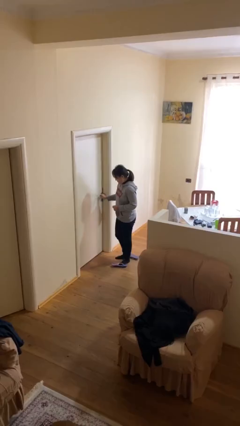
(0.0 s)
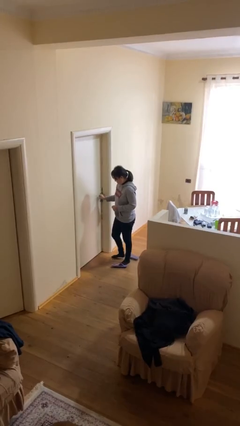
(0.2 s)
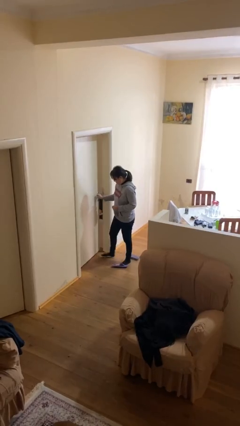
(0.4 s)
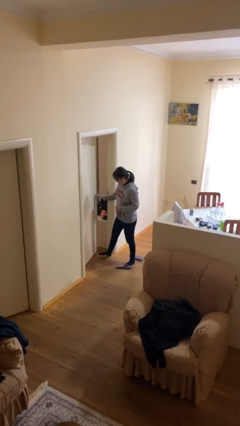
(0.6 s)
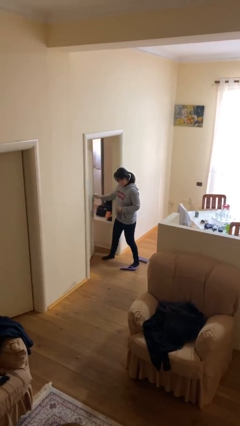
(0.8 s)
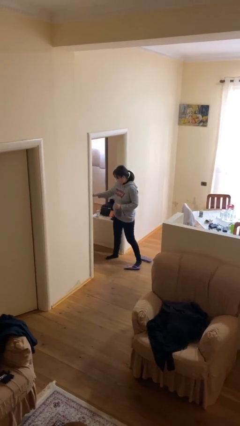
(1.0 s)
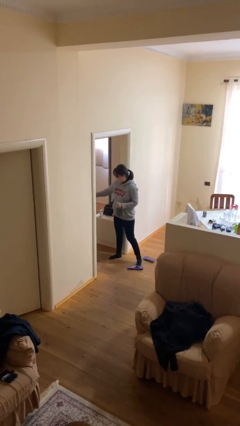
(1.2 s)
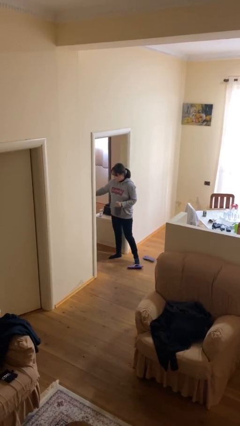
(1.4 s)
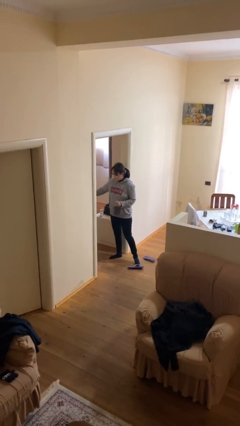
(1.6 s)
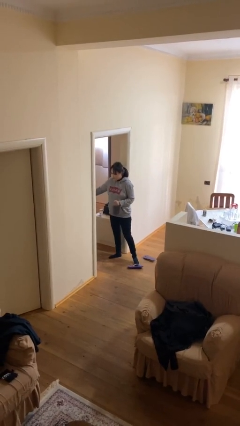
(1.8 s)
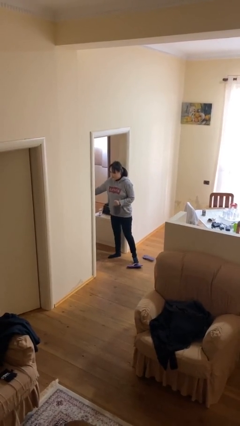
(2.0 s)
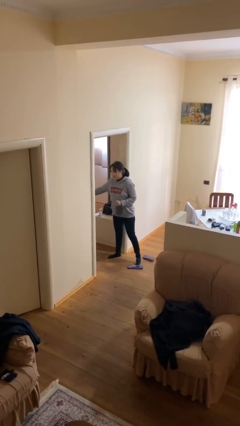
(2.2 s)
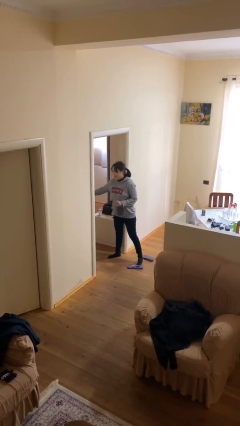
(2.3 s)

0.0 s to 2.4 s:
person opens facility door

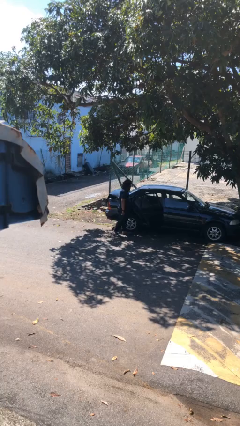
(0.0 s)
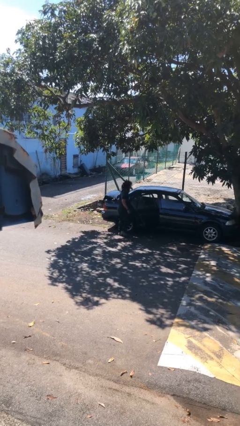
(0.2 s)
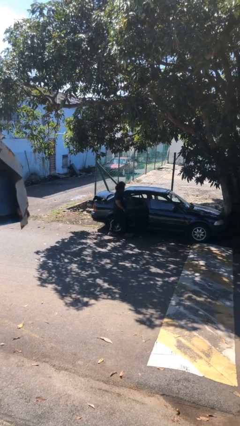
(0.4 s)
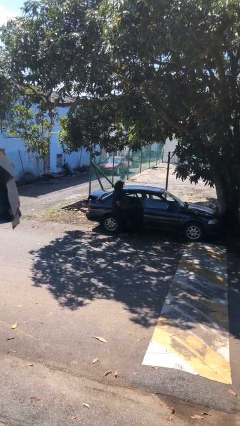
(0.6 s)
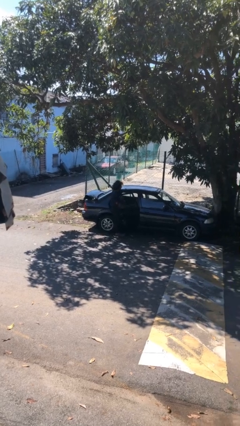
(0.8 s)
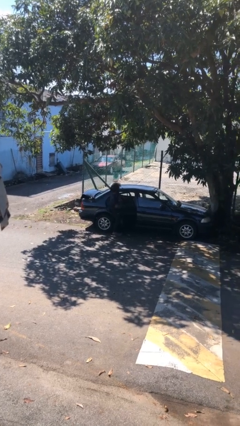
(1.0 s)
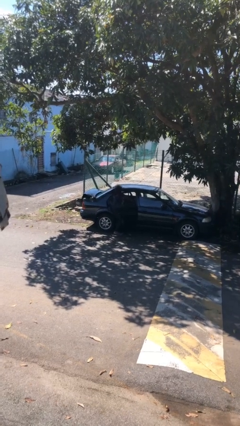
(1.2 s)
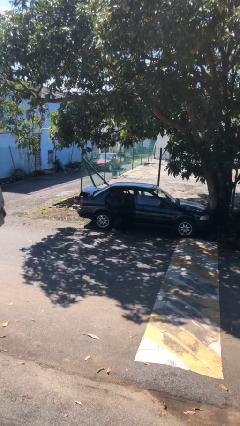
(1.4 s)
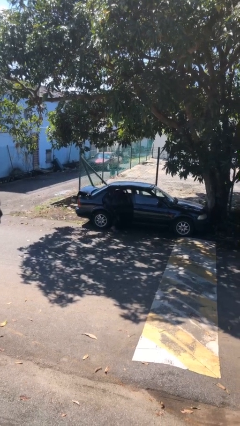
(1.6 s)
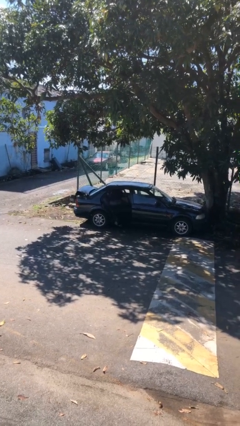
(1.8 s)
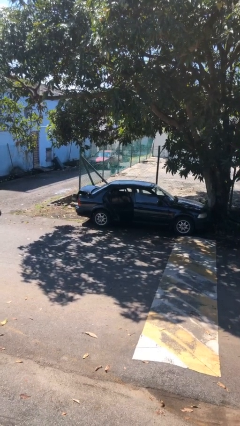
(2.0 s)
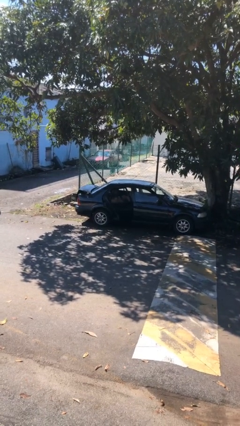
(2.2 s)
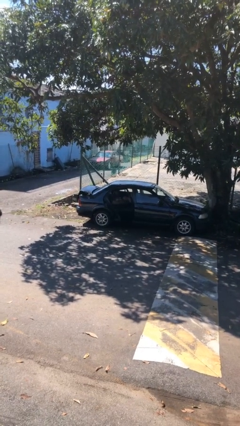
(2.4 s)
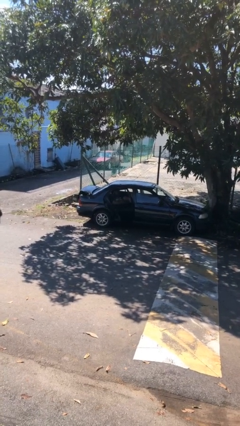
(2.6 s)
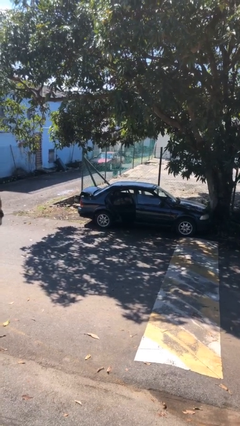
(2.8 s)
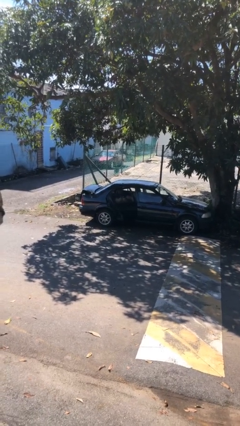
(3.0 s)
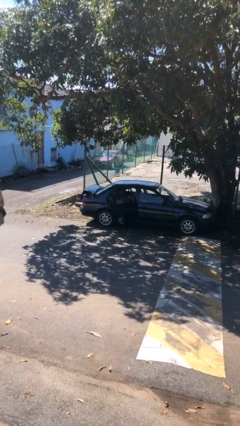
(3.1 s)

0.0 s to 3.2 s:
person enters car

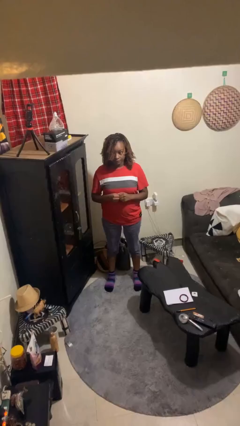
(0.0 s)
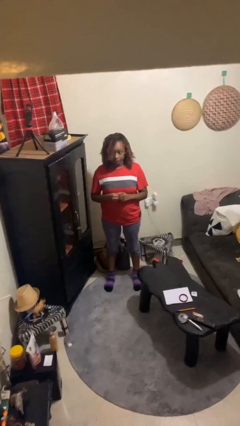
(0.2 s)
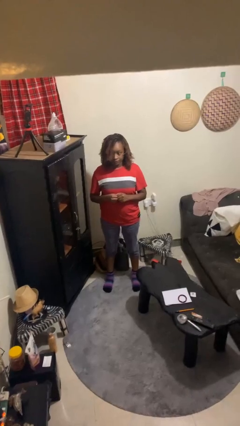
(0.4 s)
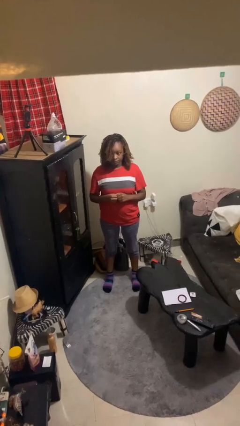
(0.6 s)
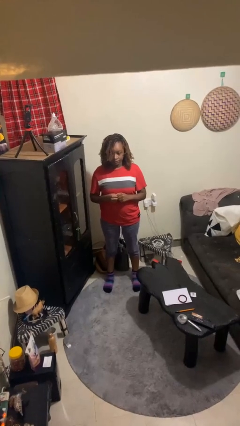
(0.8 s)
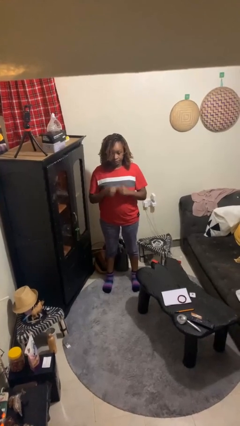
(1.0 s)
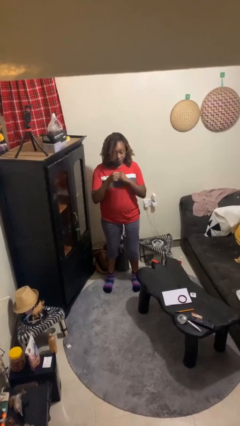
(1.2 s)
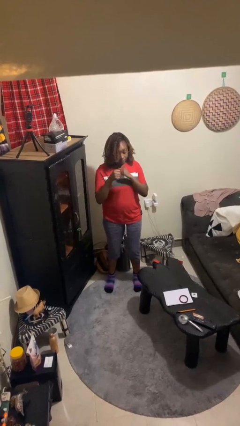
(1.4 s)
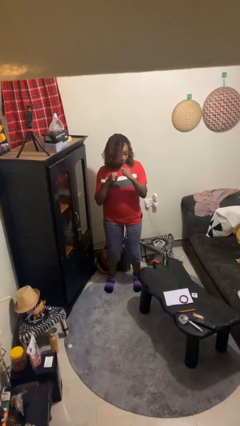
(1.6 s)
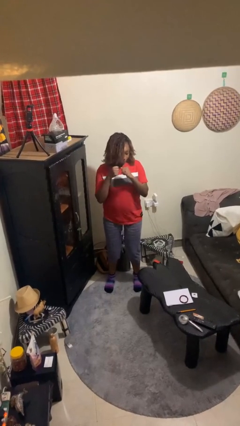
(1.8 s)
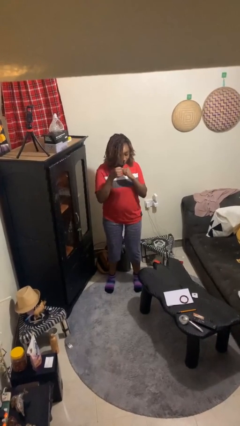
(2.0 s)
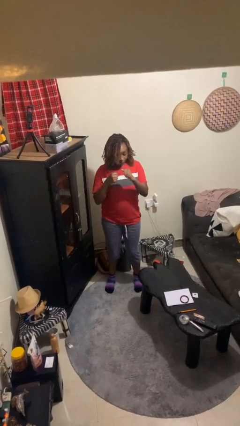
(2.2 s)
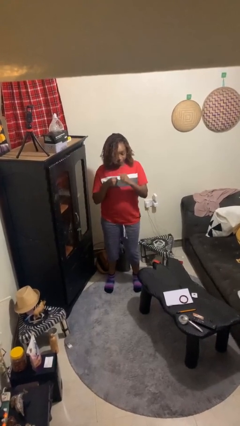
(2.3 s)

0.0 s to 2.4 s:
person punches

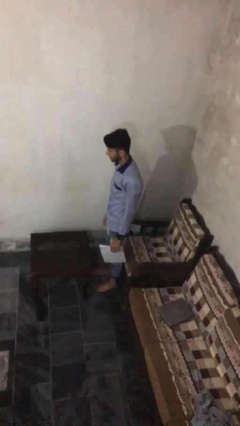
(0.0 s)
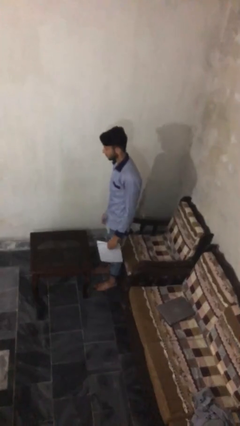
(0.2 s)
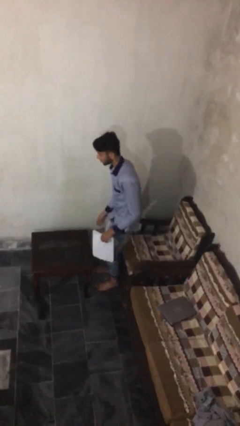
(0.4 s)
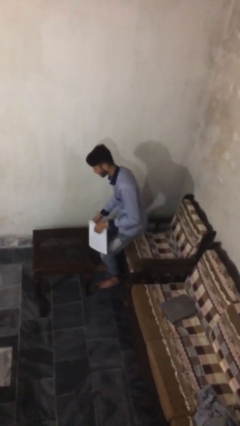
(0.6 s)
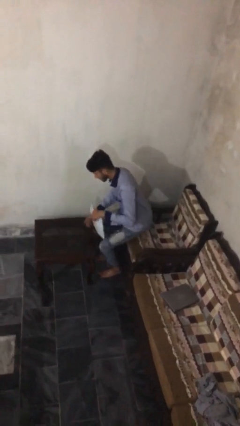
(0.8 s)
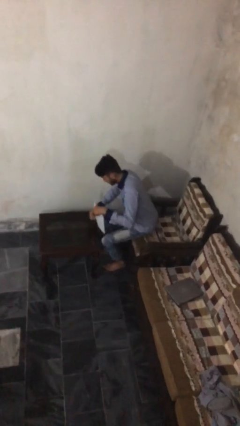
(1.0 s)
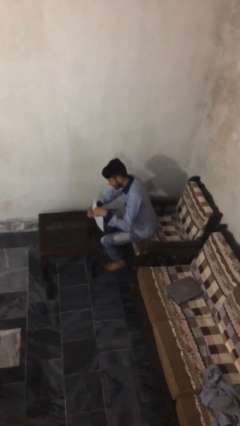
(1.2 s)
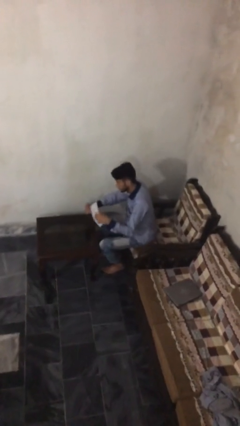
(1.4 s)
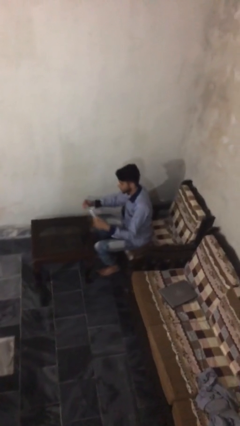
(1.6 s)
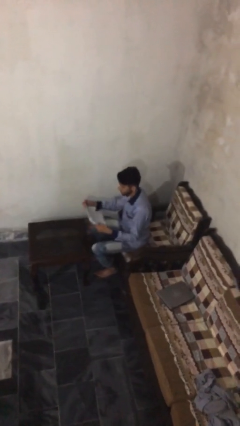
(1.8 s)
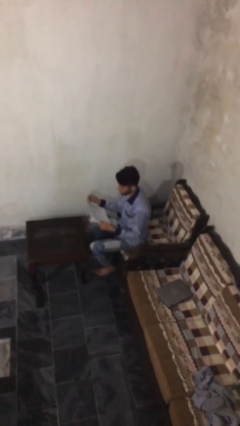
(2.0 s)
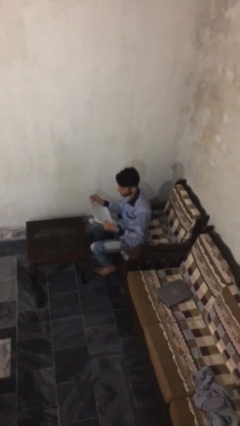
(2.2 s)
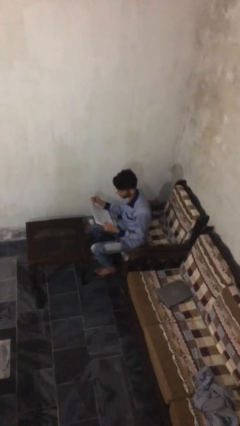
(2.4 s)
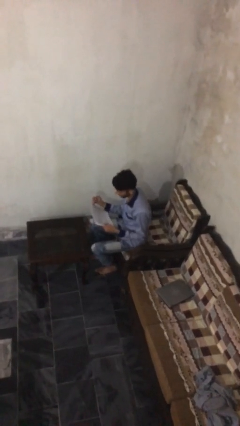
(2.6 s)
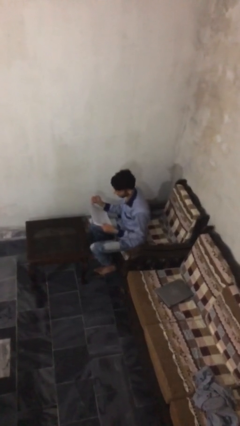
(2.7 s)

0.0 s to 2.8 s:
person sits down

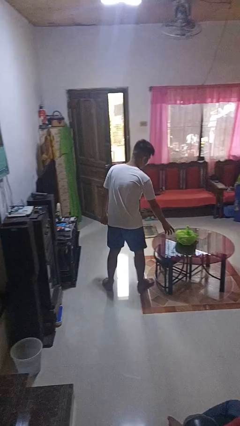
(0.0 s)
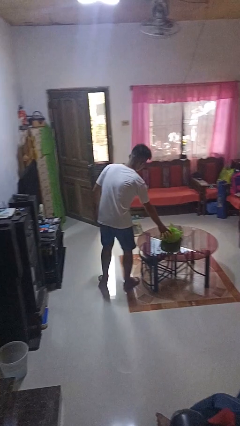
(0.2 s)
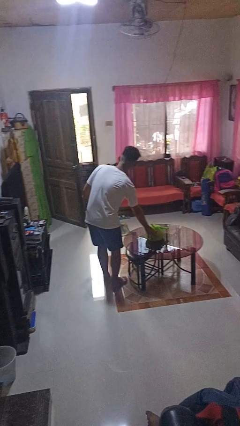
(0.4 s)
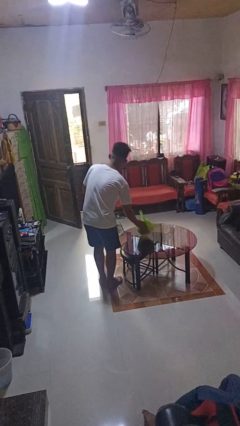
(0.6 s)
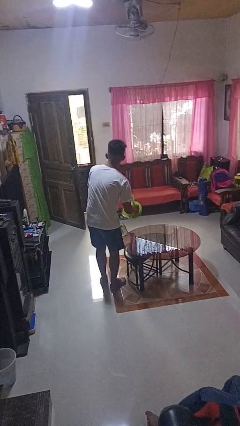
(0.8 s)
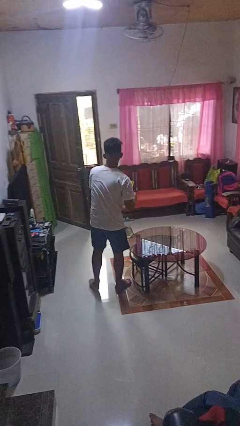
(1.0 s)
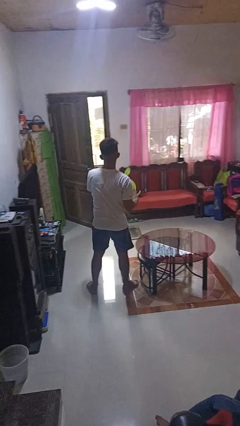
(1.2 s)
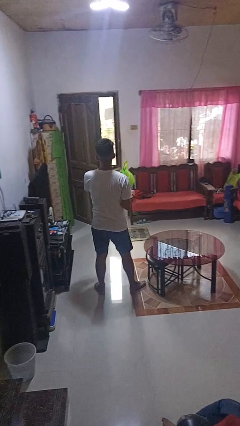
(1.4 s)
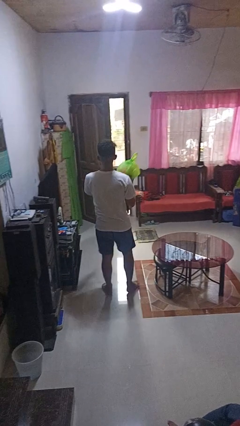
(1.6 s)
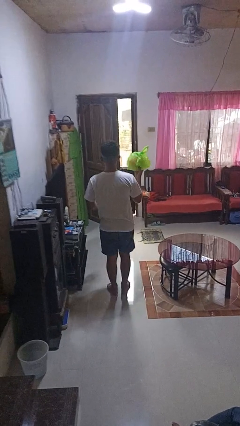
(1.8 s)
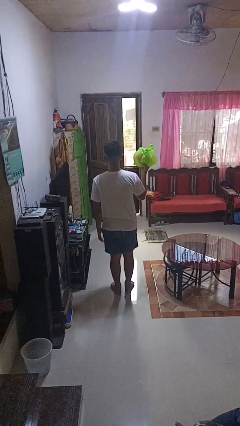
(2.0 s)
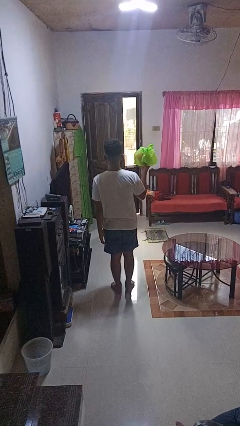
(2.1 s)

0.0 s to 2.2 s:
person picks up object from table

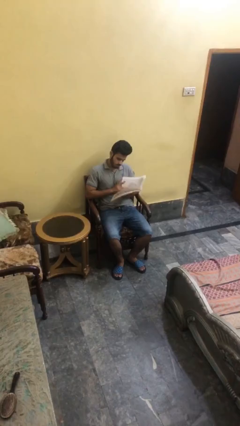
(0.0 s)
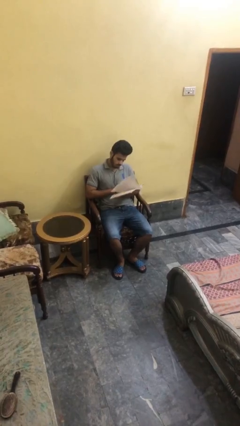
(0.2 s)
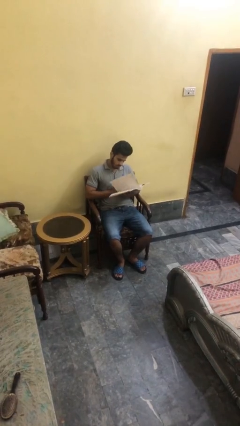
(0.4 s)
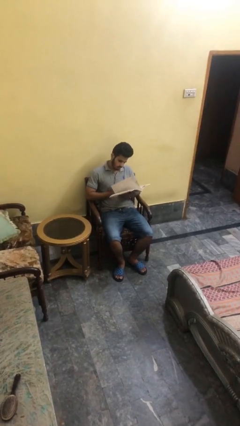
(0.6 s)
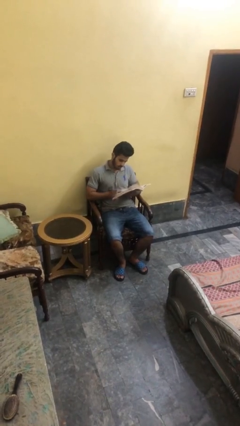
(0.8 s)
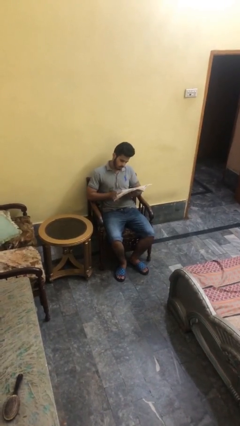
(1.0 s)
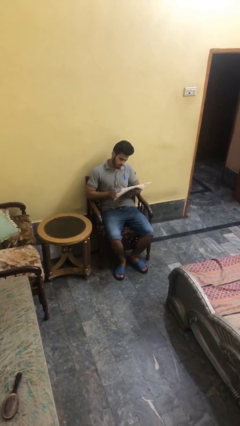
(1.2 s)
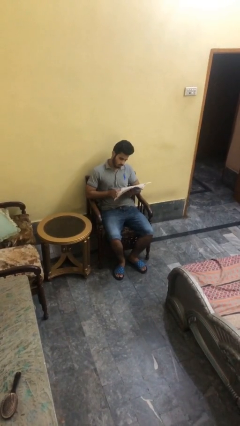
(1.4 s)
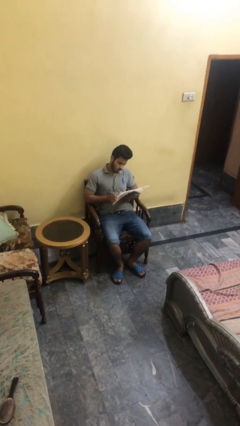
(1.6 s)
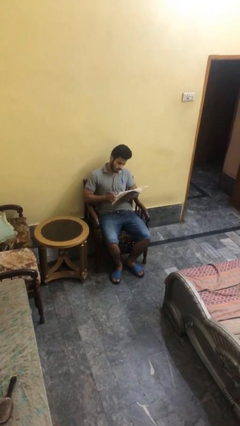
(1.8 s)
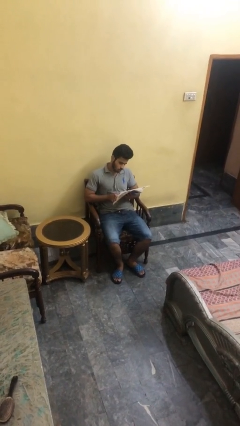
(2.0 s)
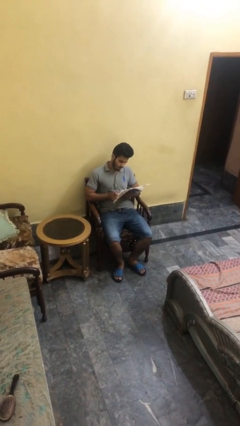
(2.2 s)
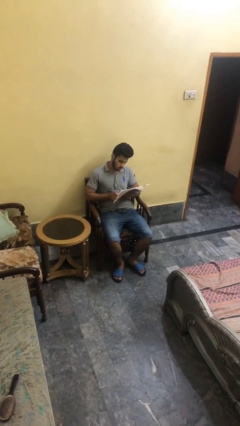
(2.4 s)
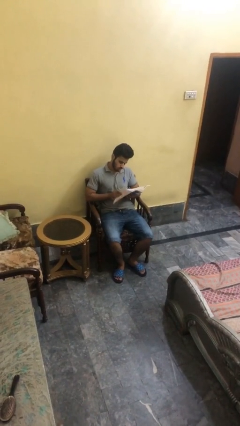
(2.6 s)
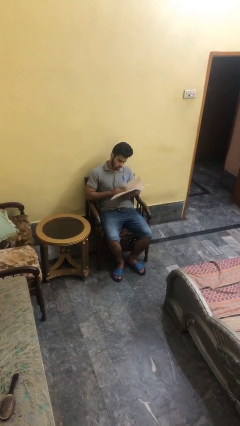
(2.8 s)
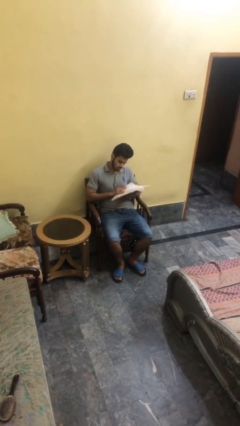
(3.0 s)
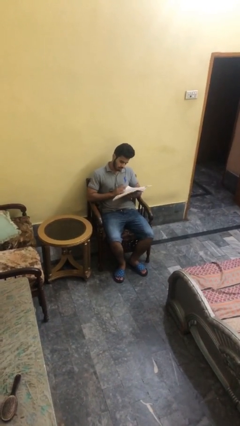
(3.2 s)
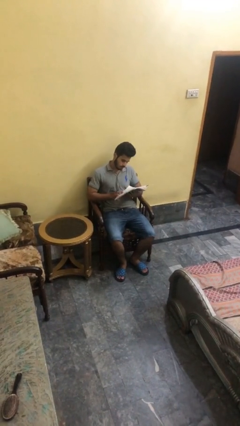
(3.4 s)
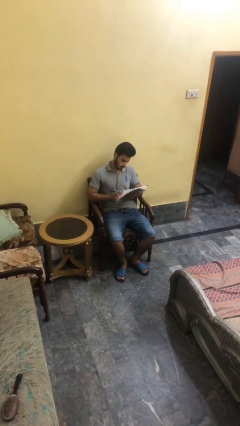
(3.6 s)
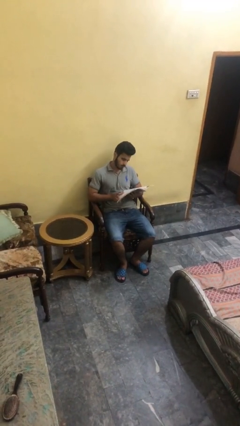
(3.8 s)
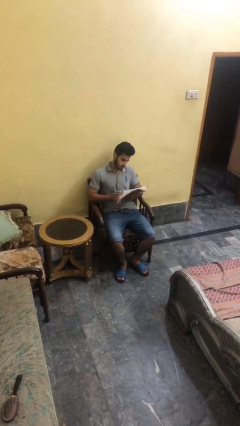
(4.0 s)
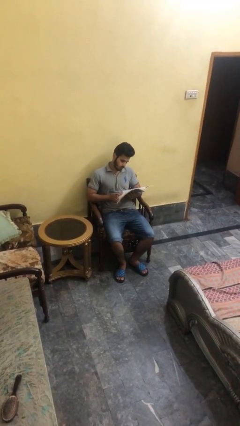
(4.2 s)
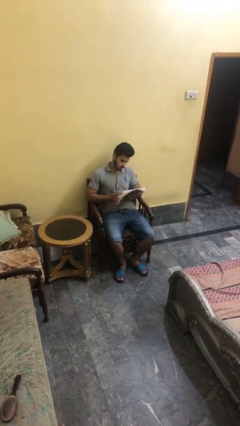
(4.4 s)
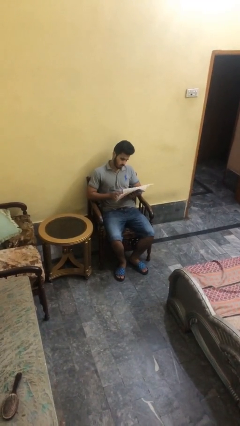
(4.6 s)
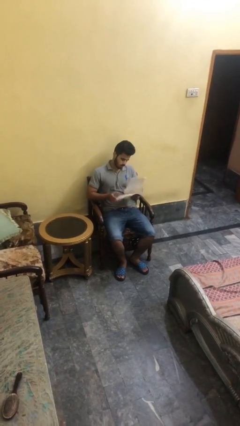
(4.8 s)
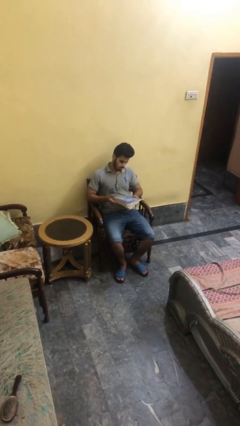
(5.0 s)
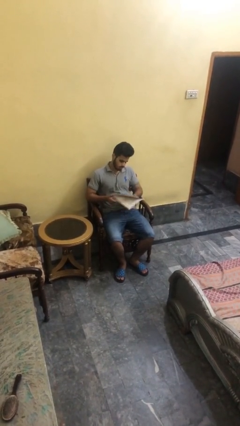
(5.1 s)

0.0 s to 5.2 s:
person reads document
